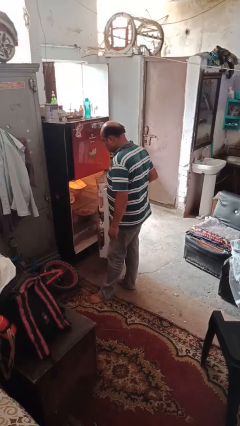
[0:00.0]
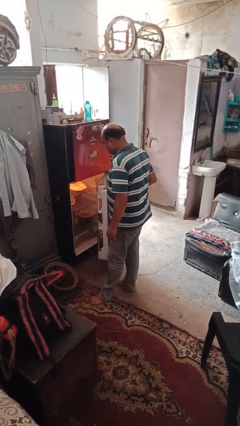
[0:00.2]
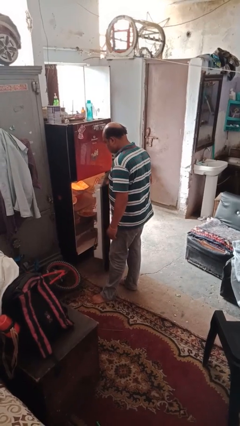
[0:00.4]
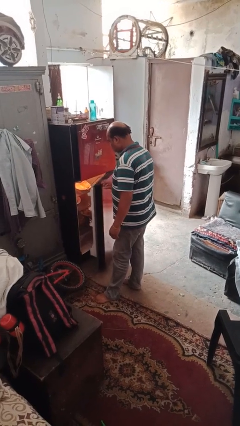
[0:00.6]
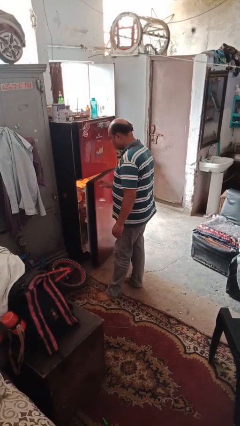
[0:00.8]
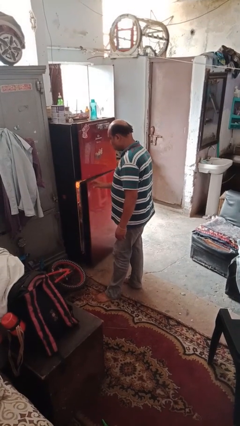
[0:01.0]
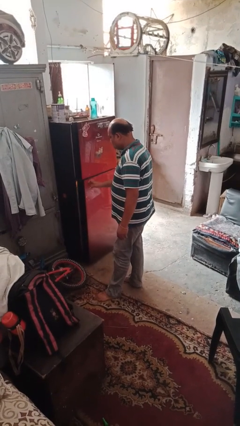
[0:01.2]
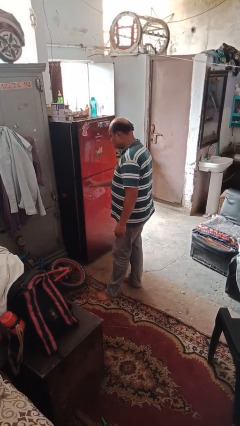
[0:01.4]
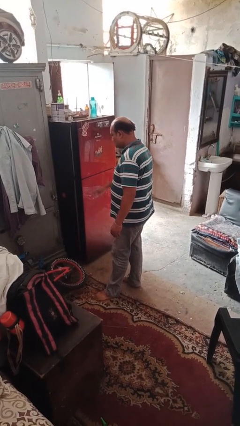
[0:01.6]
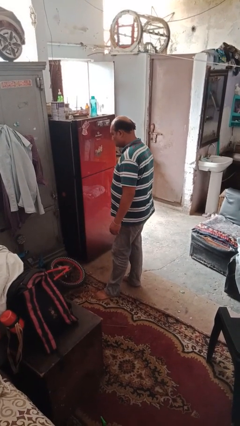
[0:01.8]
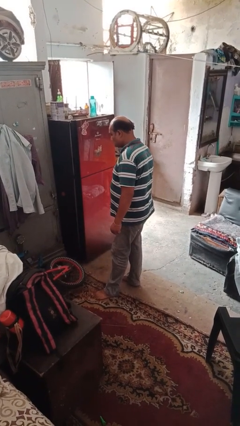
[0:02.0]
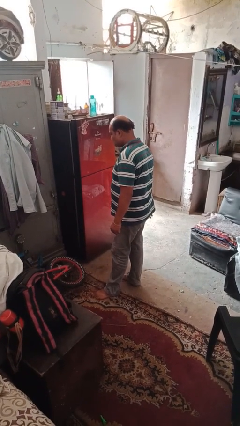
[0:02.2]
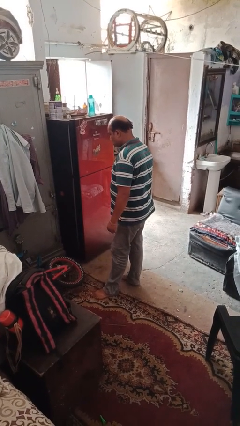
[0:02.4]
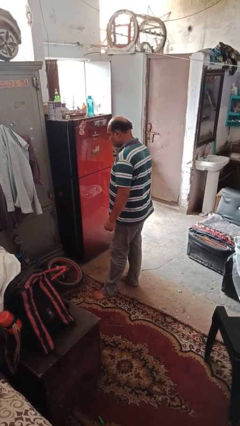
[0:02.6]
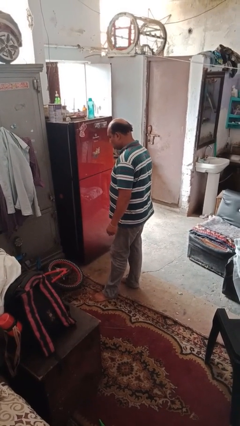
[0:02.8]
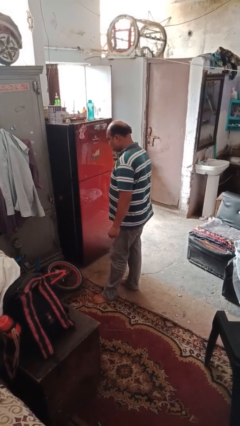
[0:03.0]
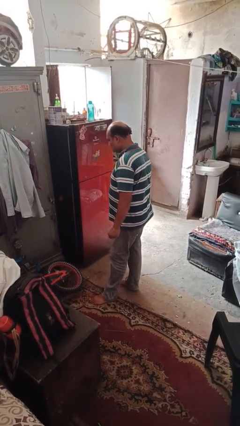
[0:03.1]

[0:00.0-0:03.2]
person closes refrigerator

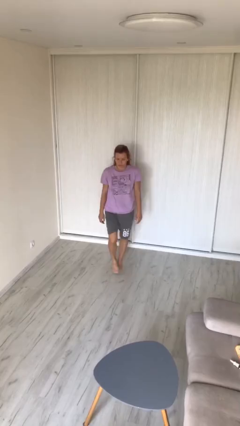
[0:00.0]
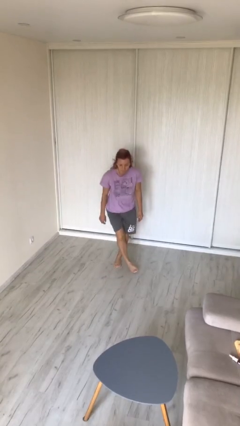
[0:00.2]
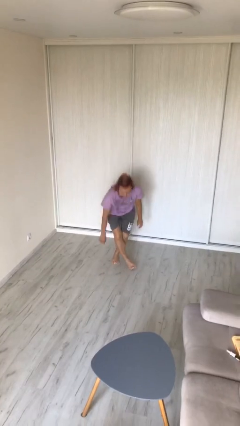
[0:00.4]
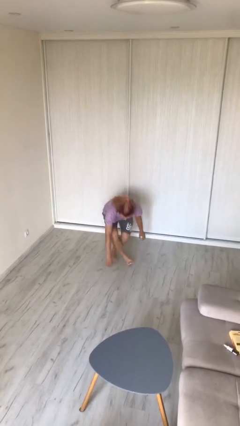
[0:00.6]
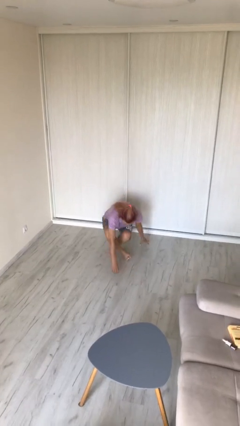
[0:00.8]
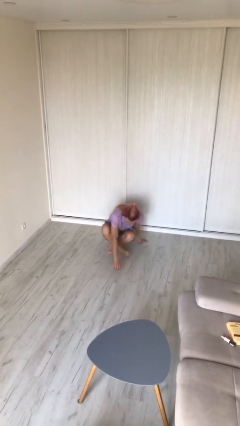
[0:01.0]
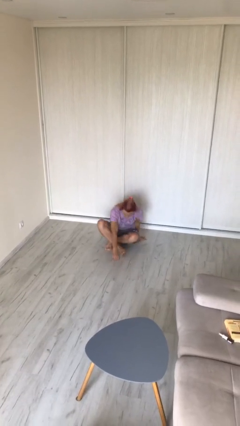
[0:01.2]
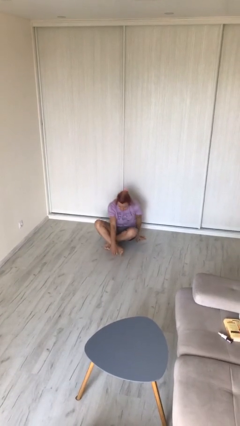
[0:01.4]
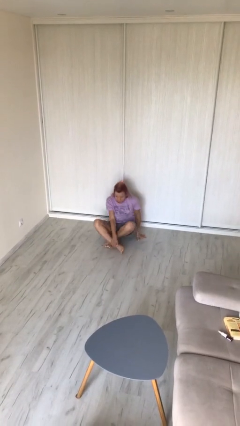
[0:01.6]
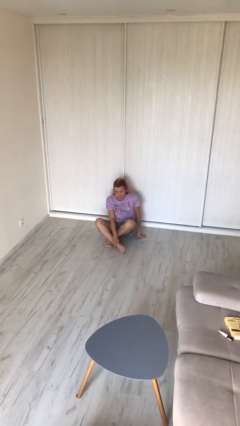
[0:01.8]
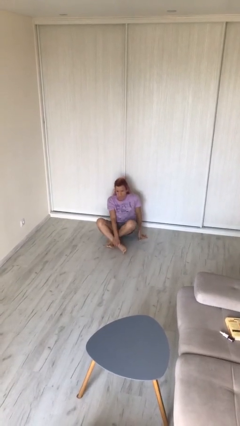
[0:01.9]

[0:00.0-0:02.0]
person sits crisscross

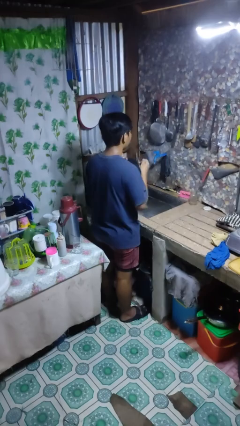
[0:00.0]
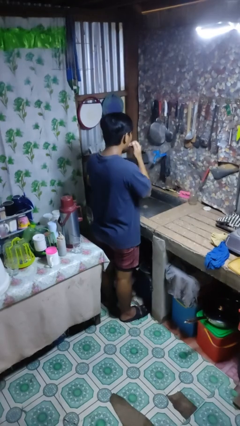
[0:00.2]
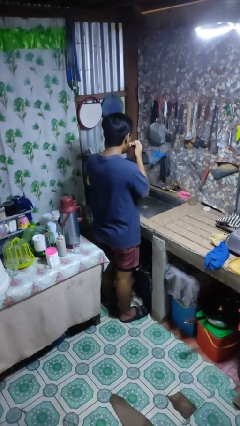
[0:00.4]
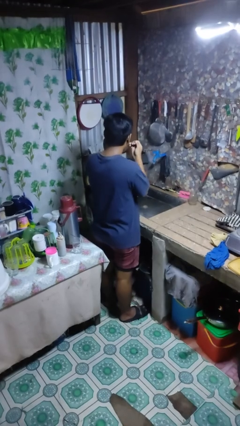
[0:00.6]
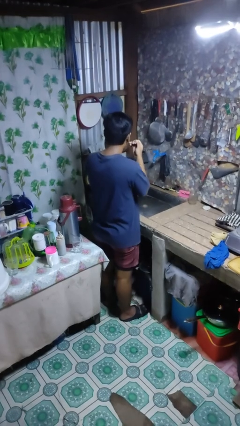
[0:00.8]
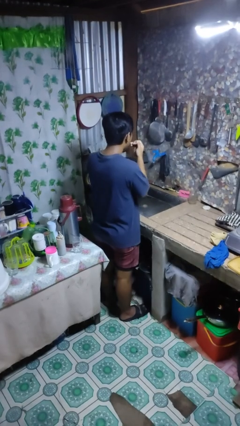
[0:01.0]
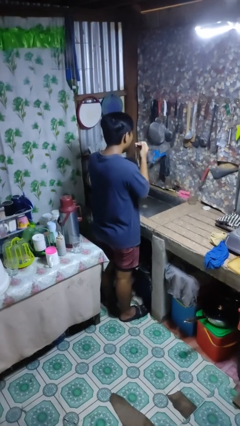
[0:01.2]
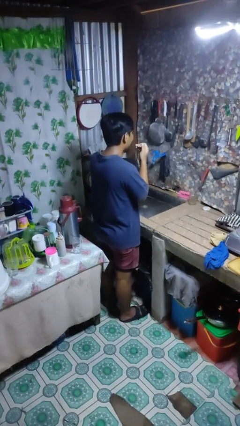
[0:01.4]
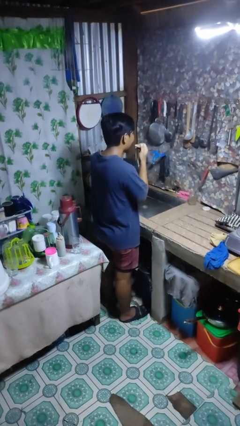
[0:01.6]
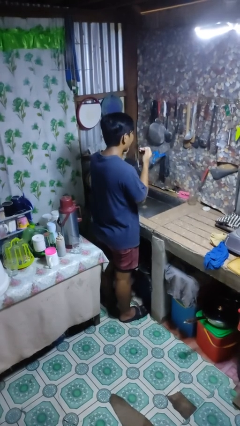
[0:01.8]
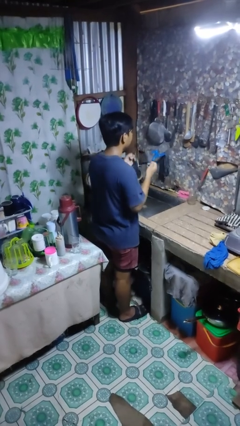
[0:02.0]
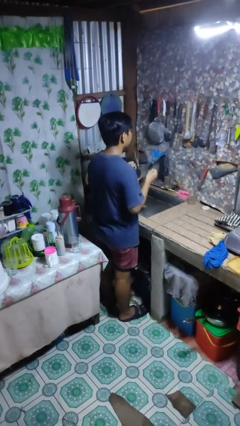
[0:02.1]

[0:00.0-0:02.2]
person flosses

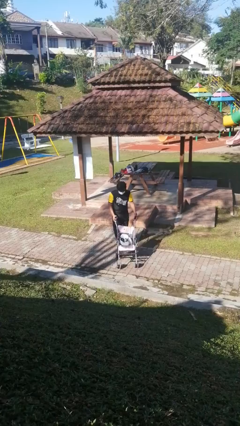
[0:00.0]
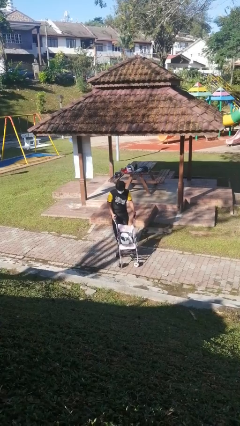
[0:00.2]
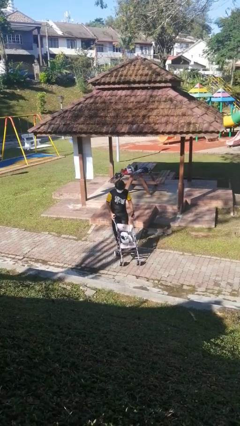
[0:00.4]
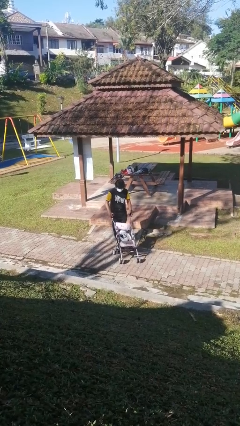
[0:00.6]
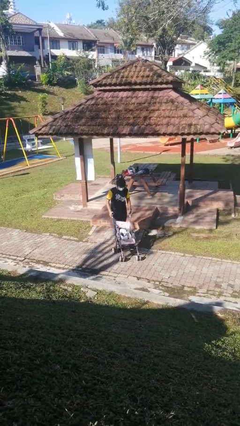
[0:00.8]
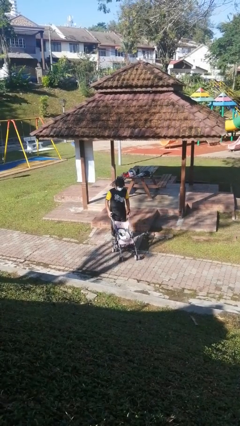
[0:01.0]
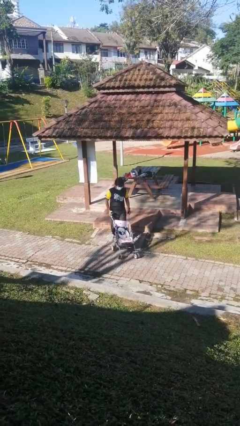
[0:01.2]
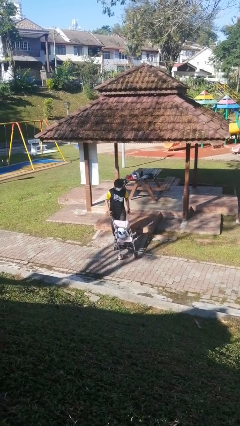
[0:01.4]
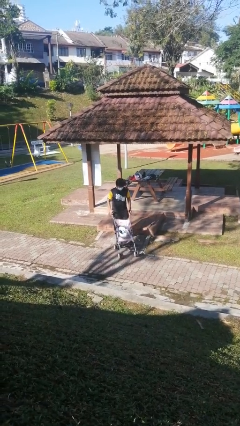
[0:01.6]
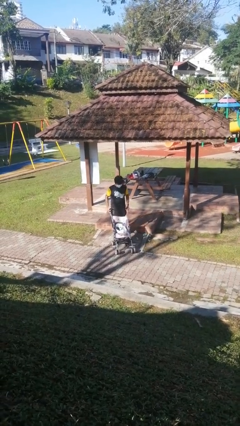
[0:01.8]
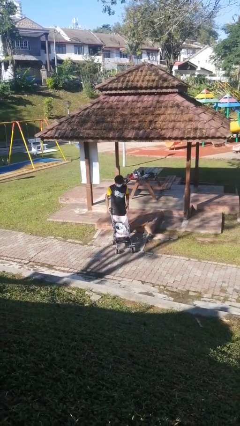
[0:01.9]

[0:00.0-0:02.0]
person pulls wheeled cart

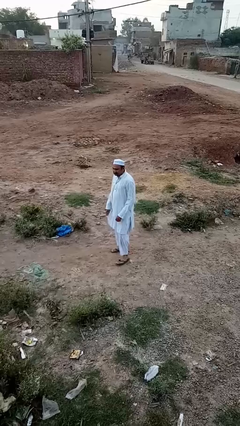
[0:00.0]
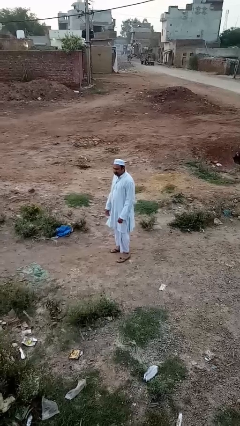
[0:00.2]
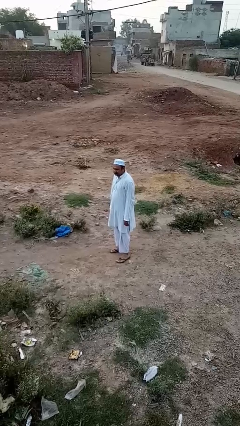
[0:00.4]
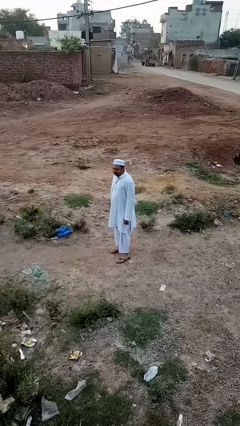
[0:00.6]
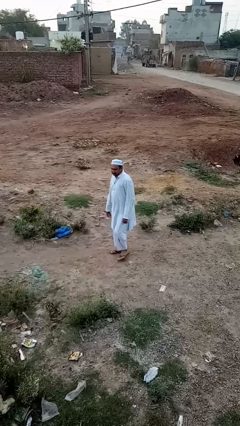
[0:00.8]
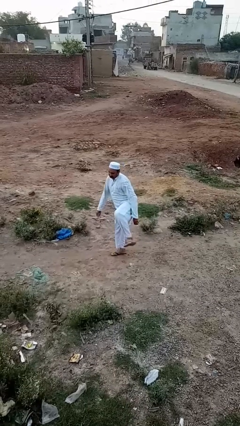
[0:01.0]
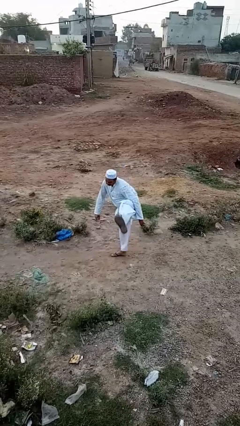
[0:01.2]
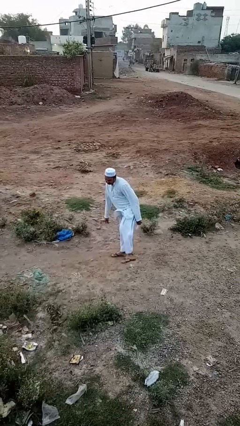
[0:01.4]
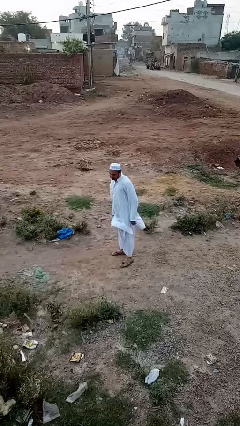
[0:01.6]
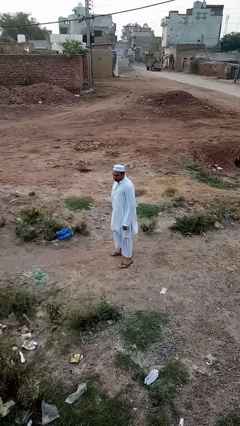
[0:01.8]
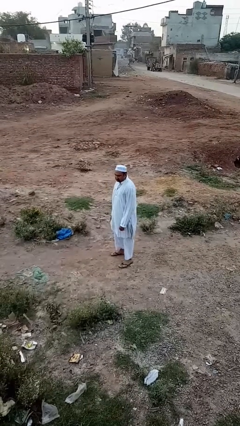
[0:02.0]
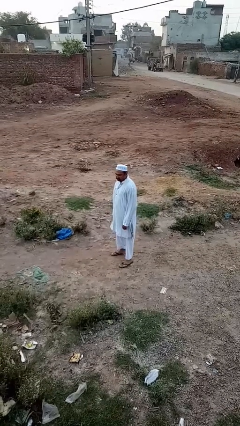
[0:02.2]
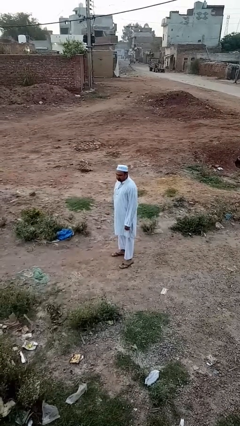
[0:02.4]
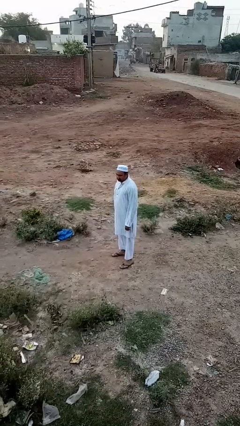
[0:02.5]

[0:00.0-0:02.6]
person karate kicks

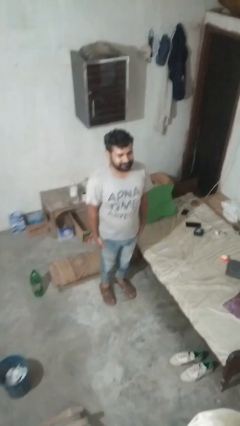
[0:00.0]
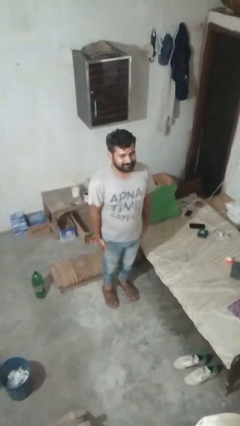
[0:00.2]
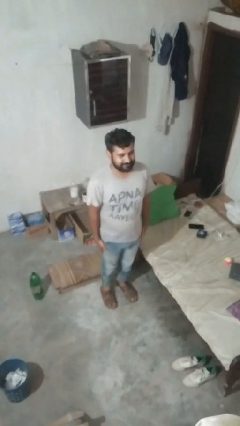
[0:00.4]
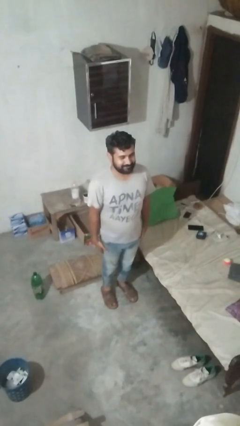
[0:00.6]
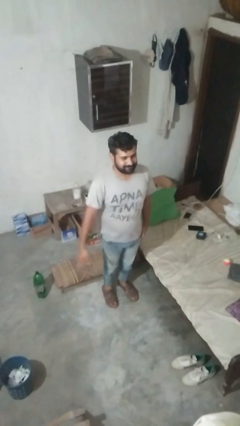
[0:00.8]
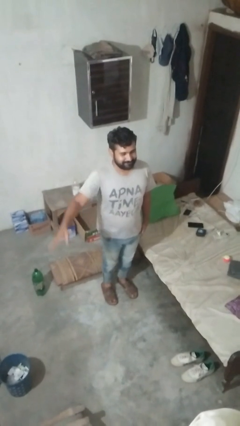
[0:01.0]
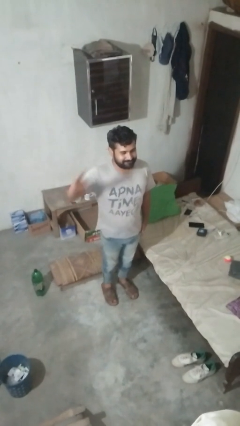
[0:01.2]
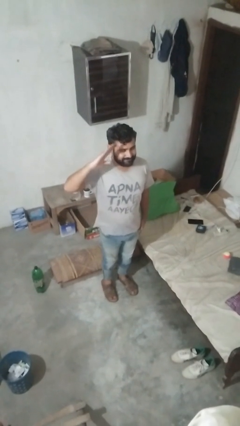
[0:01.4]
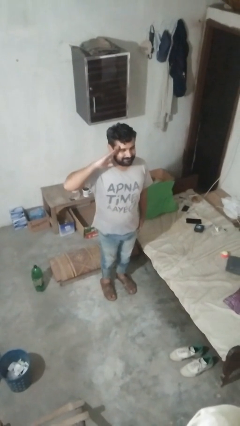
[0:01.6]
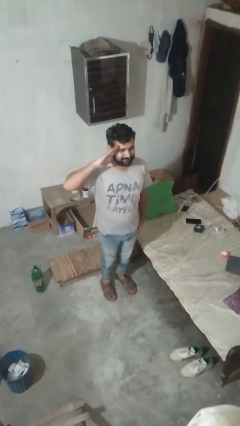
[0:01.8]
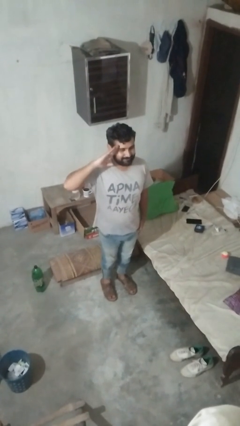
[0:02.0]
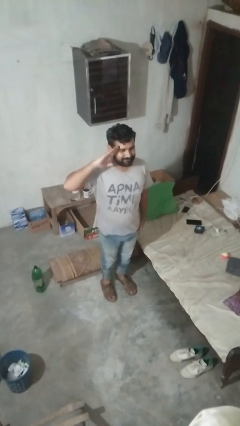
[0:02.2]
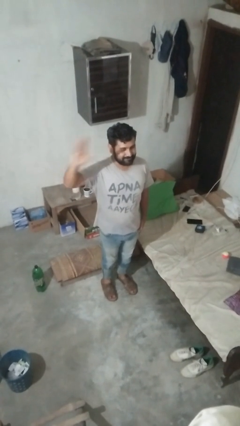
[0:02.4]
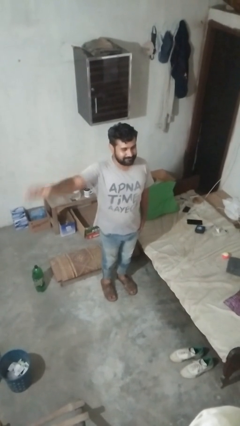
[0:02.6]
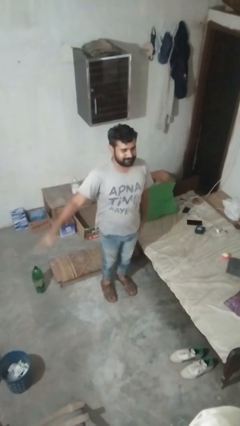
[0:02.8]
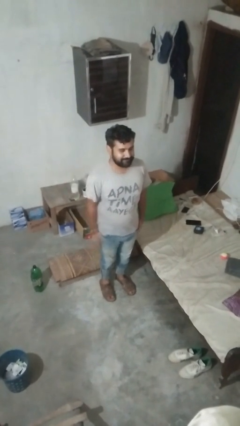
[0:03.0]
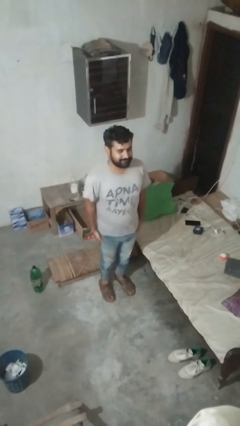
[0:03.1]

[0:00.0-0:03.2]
person salutes

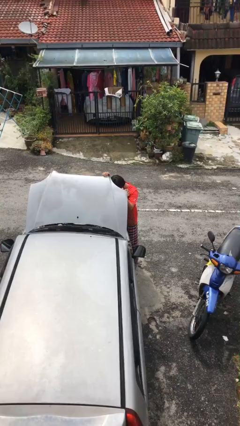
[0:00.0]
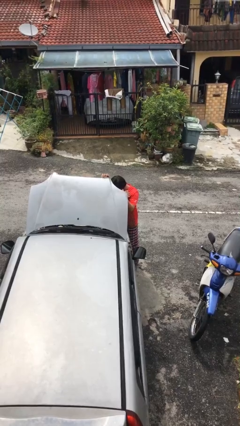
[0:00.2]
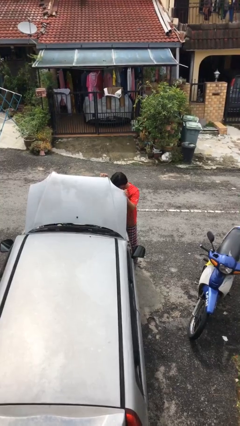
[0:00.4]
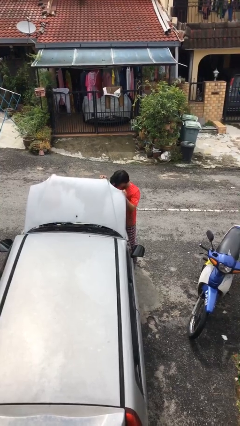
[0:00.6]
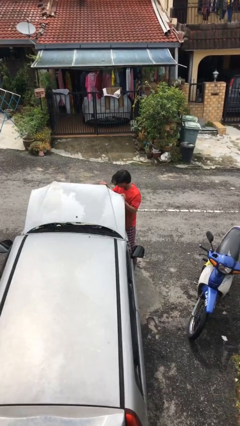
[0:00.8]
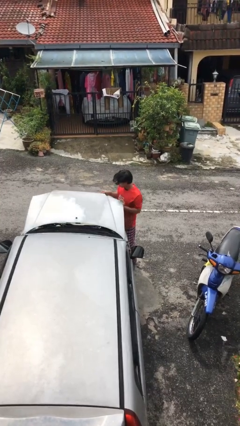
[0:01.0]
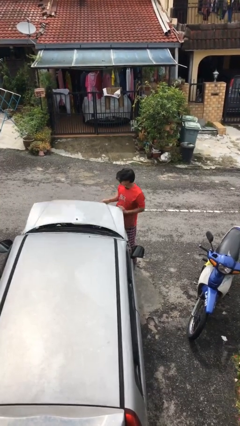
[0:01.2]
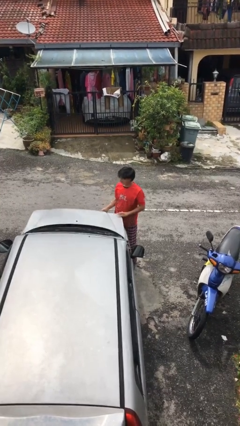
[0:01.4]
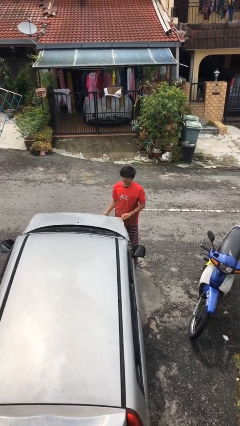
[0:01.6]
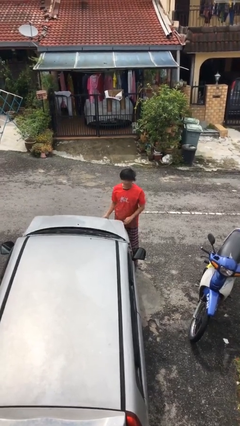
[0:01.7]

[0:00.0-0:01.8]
person closes car hood
